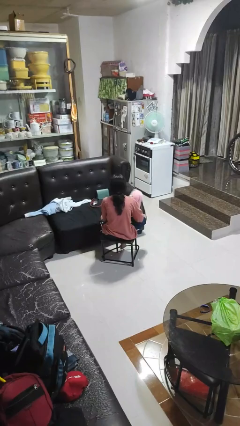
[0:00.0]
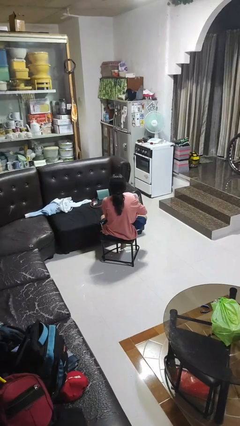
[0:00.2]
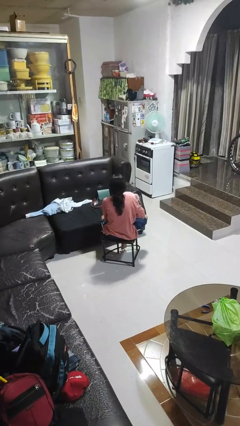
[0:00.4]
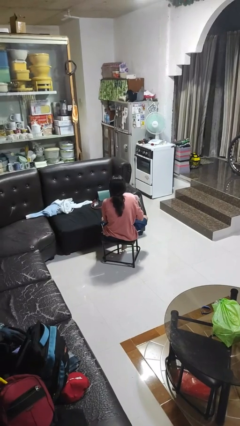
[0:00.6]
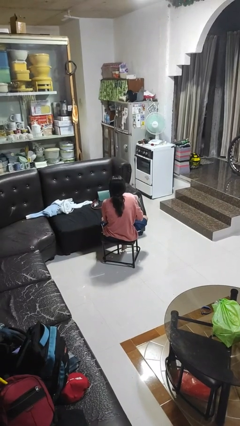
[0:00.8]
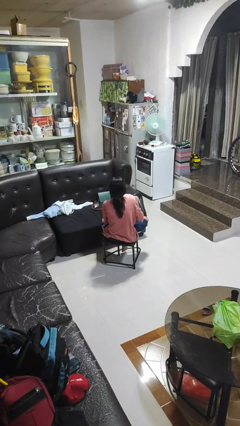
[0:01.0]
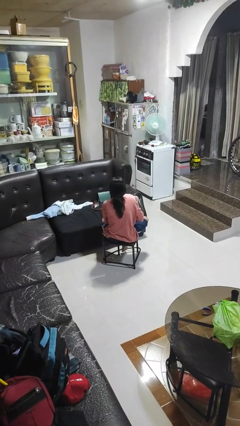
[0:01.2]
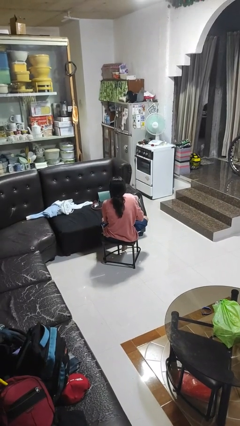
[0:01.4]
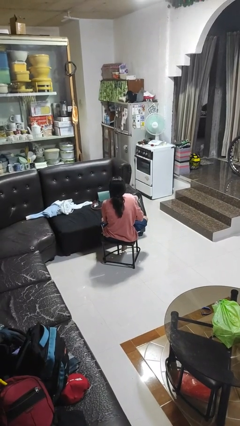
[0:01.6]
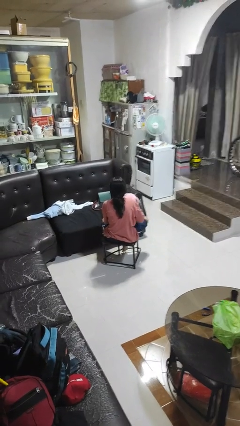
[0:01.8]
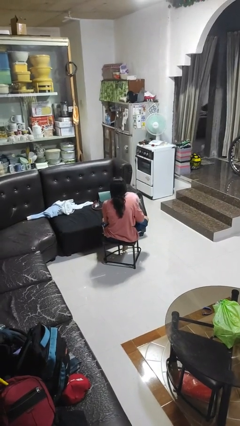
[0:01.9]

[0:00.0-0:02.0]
person hugs stuffed animal

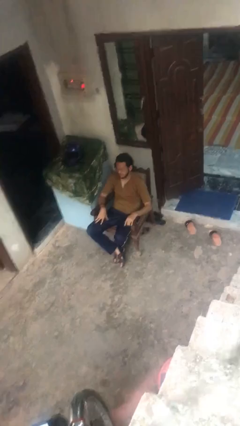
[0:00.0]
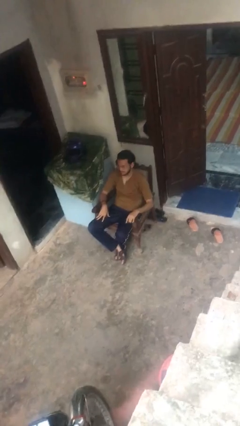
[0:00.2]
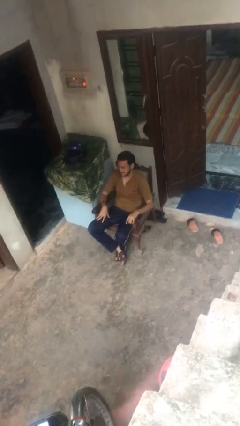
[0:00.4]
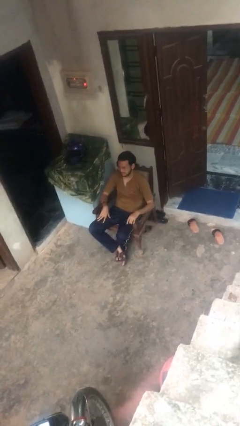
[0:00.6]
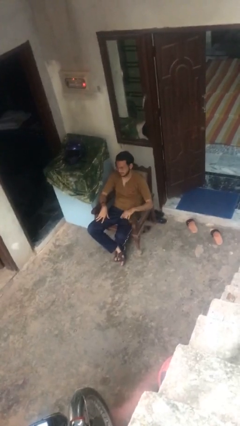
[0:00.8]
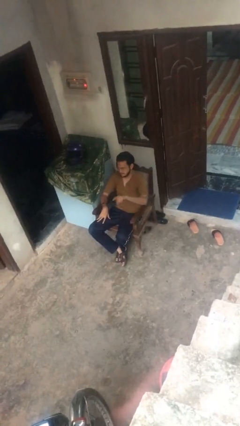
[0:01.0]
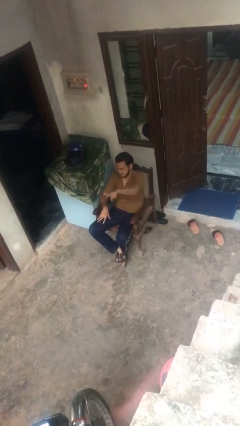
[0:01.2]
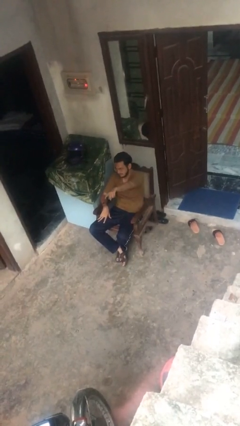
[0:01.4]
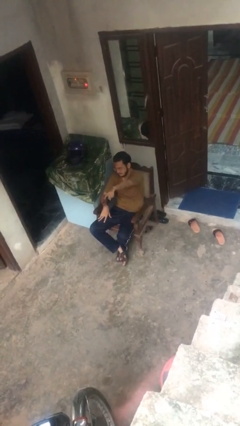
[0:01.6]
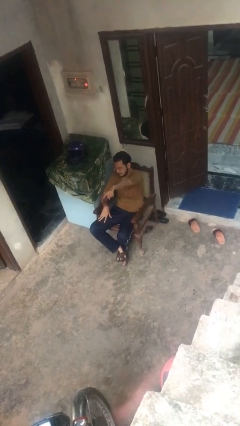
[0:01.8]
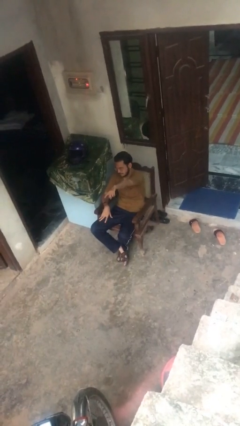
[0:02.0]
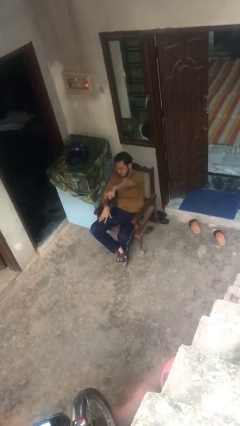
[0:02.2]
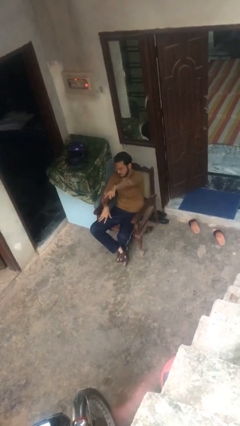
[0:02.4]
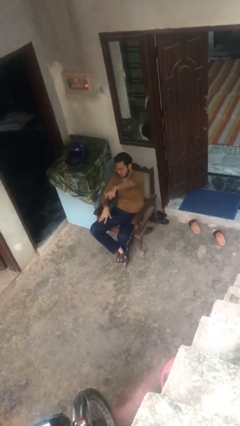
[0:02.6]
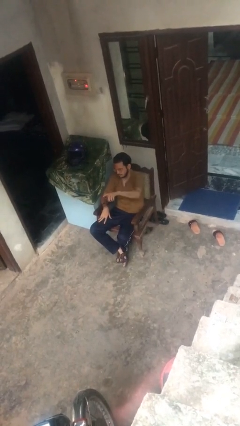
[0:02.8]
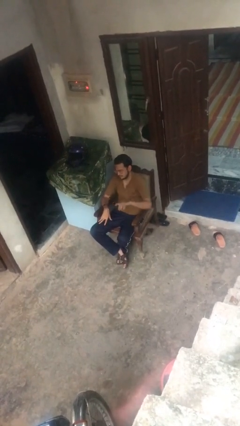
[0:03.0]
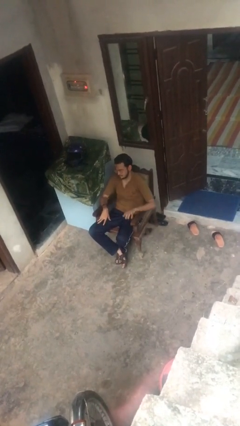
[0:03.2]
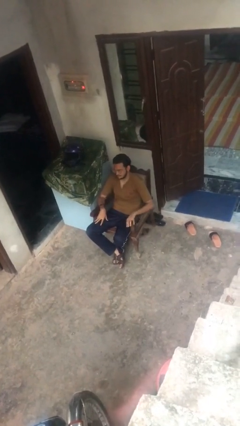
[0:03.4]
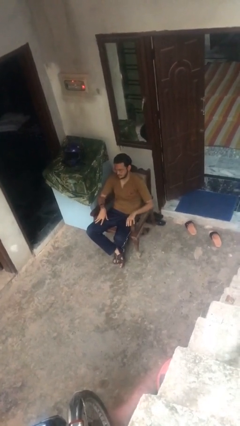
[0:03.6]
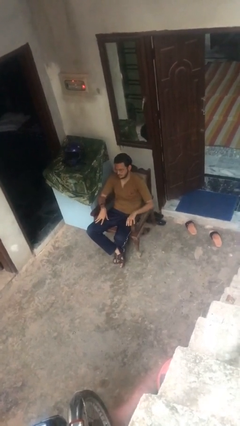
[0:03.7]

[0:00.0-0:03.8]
person points at person

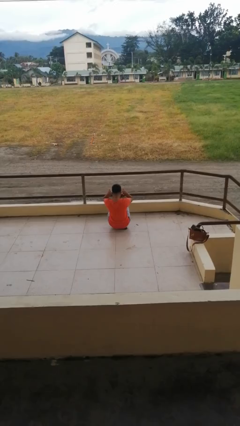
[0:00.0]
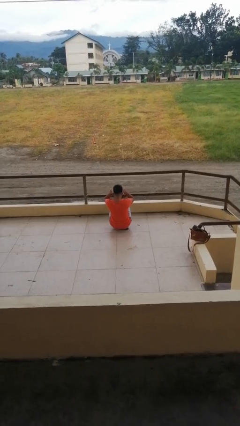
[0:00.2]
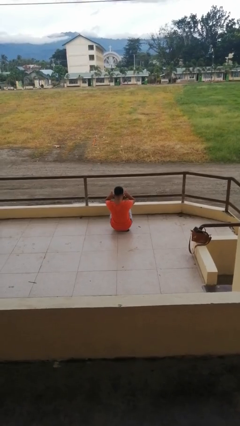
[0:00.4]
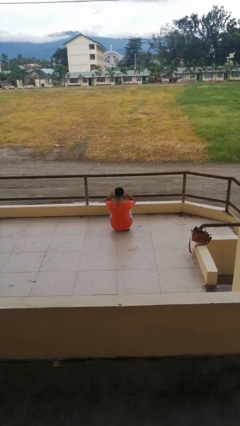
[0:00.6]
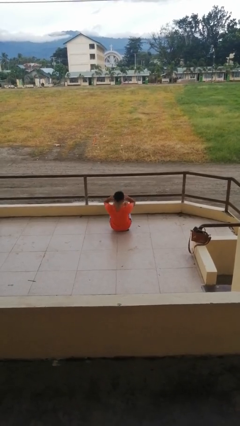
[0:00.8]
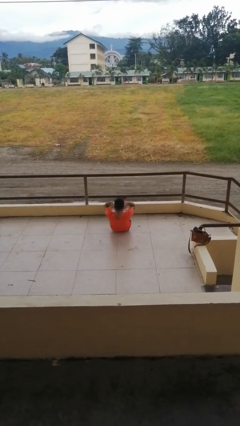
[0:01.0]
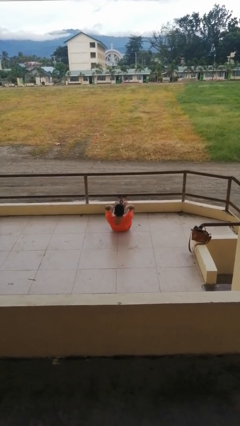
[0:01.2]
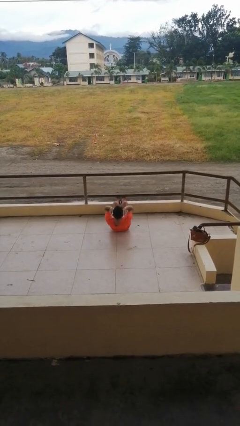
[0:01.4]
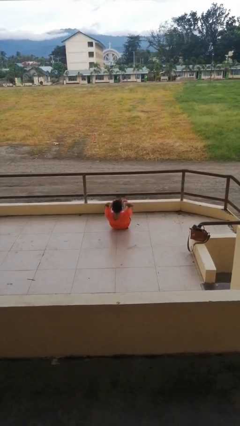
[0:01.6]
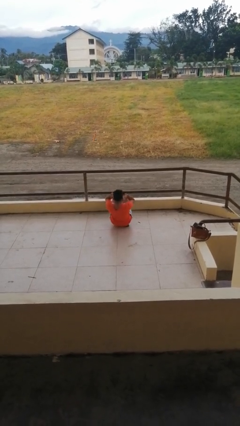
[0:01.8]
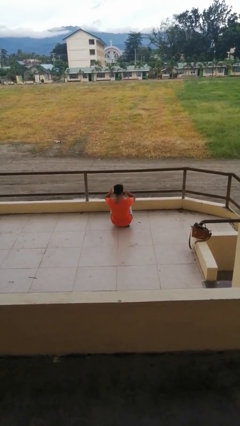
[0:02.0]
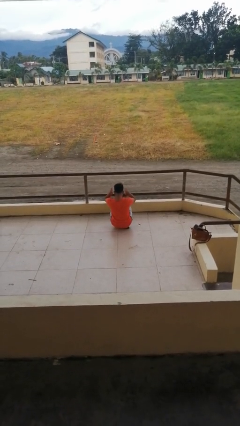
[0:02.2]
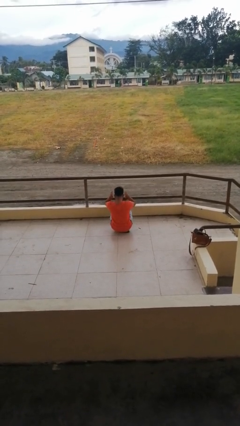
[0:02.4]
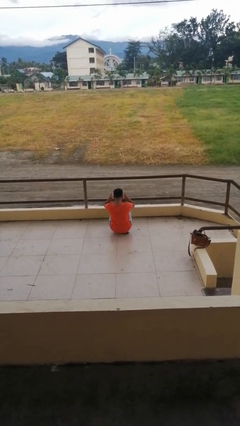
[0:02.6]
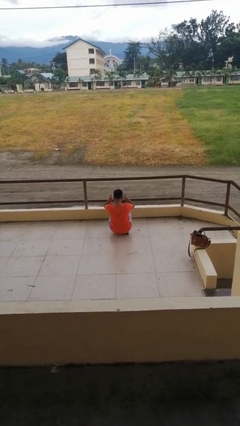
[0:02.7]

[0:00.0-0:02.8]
person exercises with situp

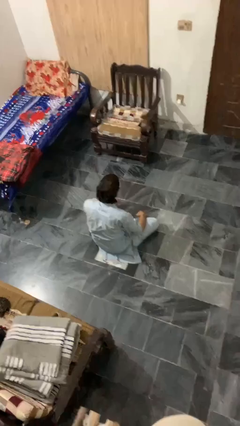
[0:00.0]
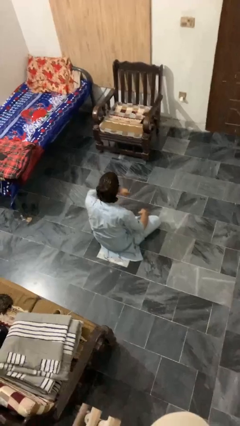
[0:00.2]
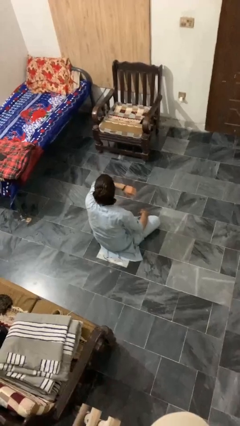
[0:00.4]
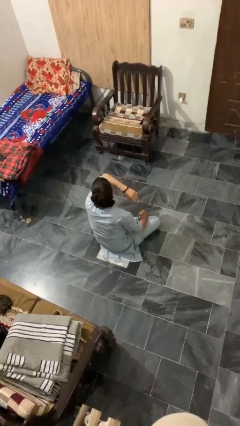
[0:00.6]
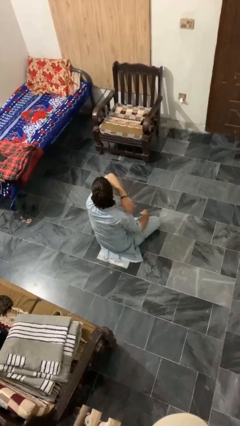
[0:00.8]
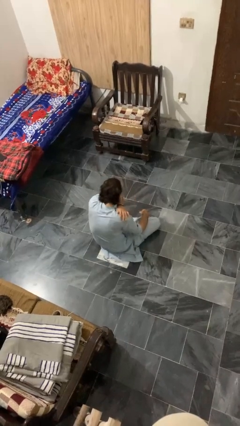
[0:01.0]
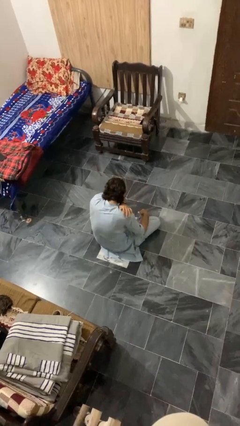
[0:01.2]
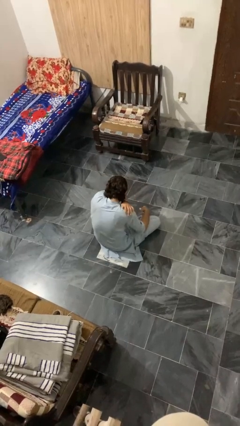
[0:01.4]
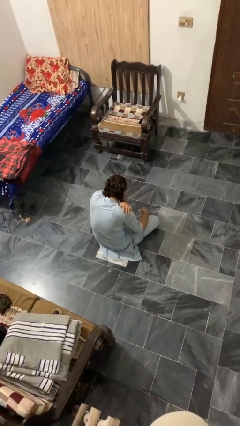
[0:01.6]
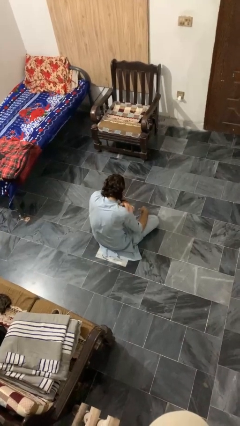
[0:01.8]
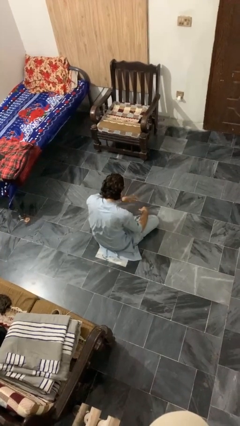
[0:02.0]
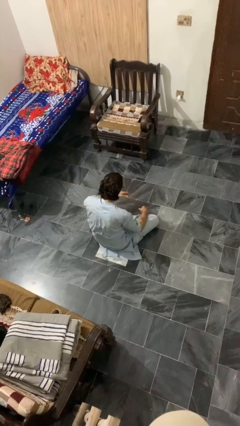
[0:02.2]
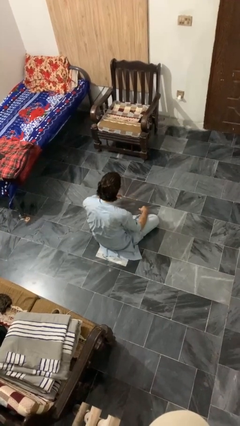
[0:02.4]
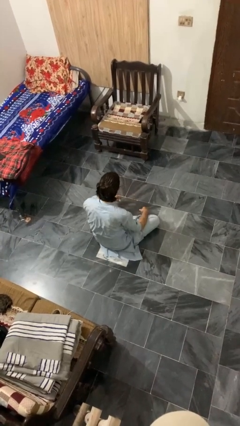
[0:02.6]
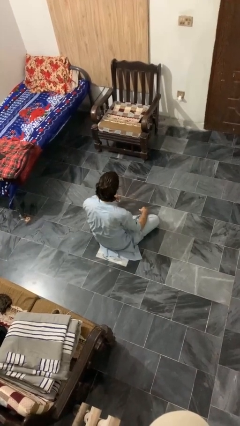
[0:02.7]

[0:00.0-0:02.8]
person sneezes into arm

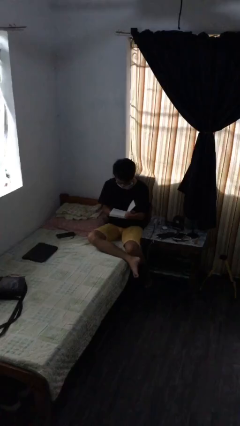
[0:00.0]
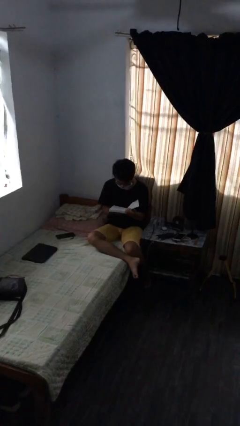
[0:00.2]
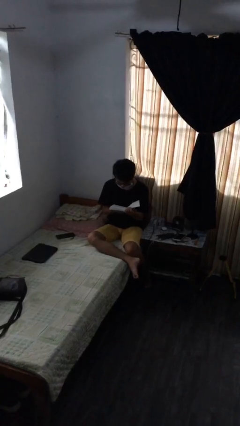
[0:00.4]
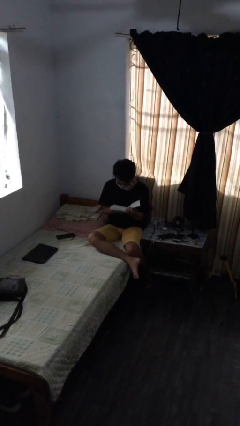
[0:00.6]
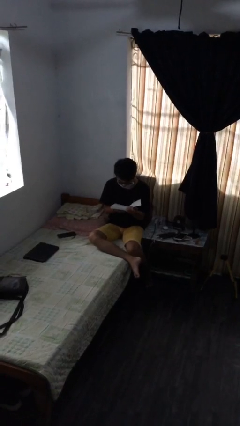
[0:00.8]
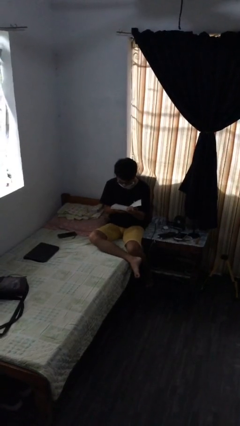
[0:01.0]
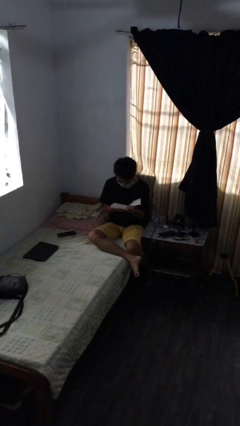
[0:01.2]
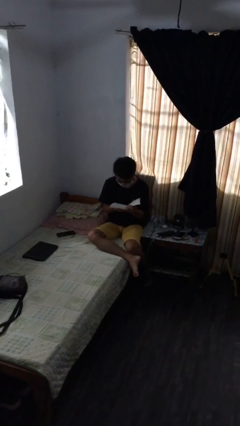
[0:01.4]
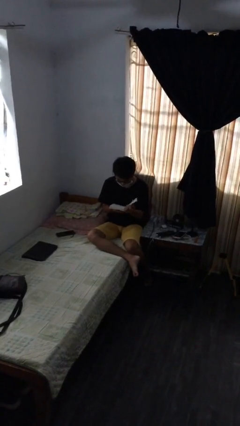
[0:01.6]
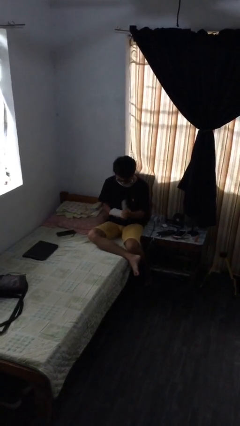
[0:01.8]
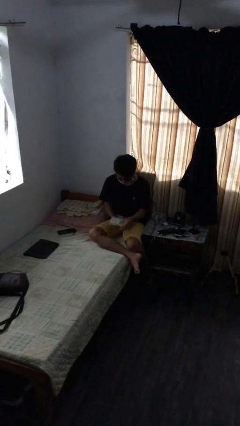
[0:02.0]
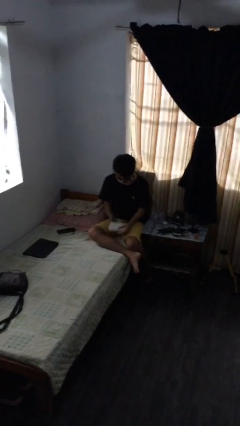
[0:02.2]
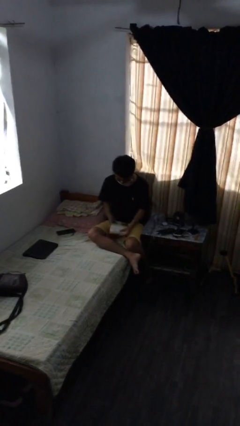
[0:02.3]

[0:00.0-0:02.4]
person reads document

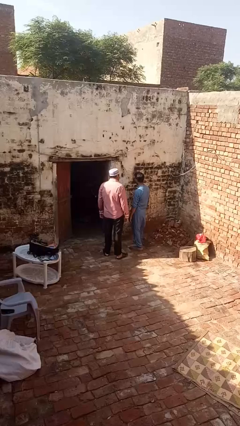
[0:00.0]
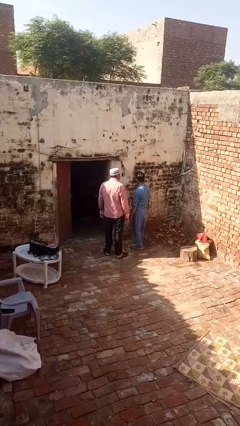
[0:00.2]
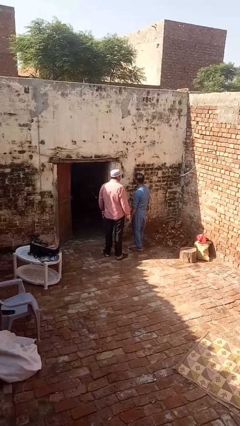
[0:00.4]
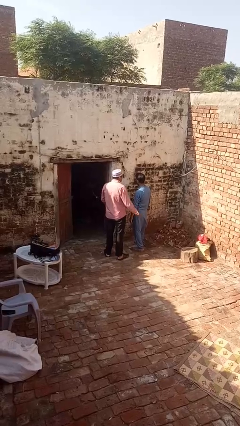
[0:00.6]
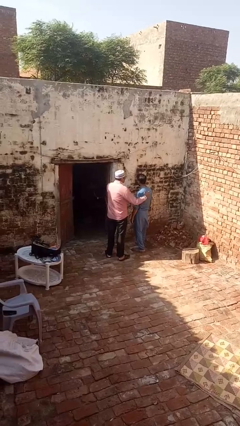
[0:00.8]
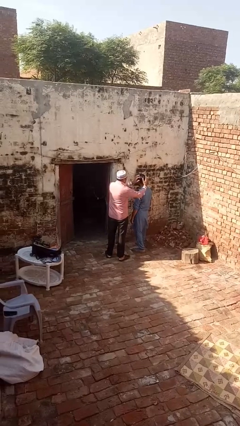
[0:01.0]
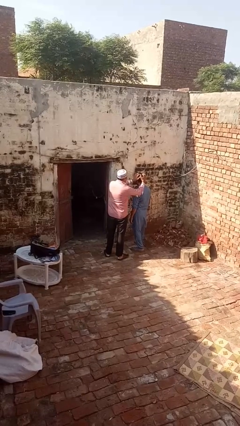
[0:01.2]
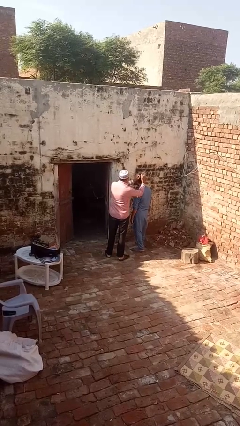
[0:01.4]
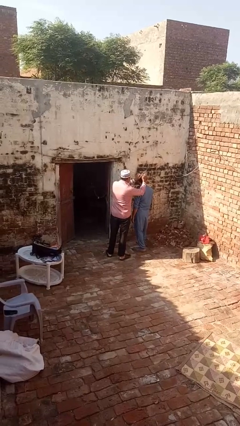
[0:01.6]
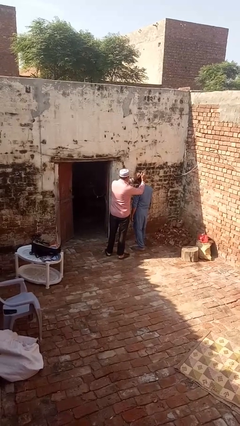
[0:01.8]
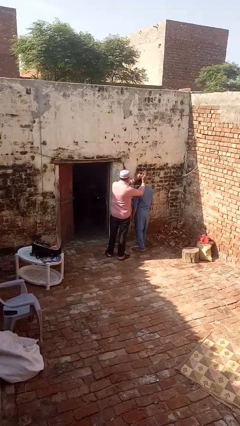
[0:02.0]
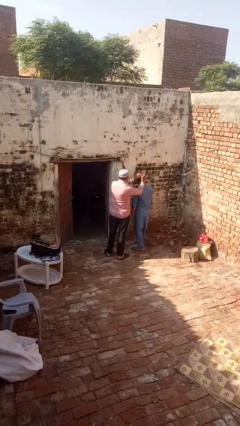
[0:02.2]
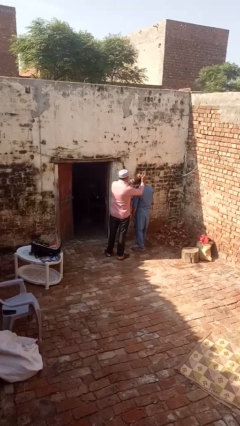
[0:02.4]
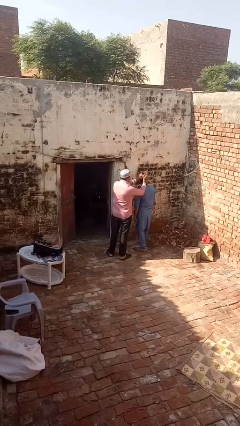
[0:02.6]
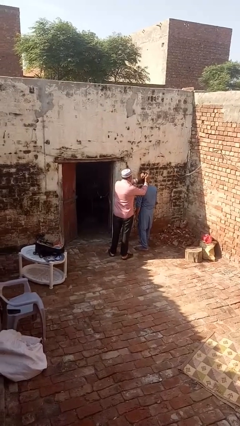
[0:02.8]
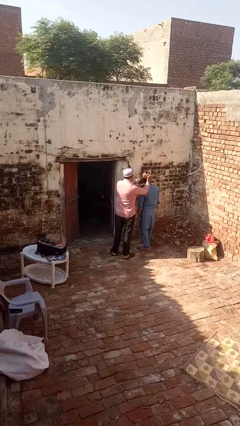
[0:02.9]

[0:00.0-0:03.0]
person grabs person by hair

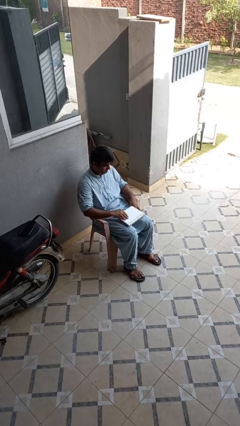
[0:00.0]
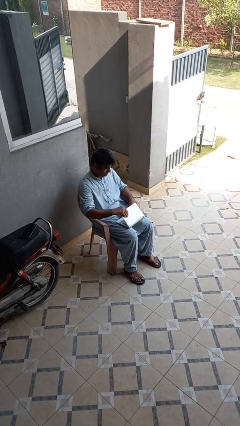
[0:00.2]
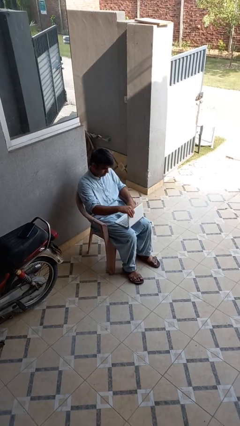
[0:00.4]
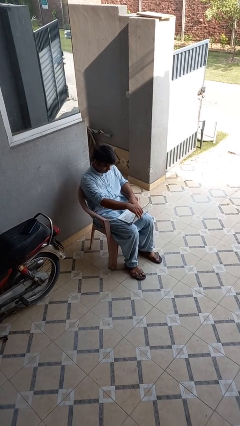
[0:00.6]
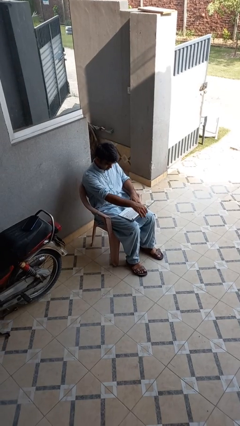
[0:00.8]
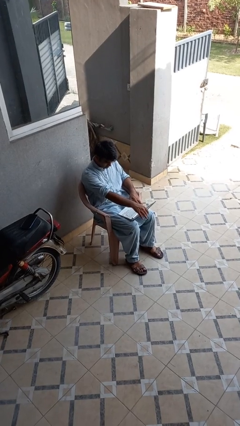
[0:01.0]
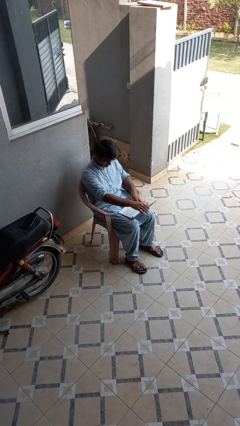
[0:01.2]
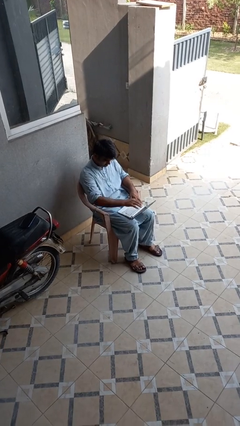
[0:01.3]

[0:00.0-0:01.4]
person opens laptop
